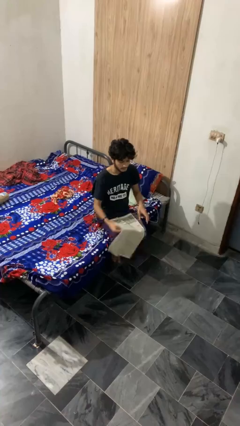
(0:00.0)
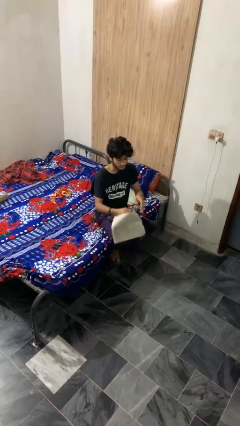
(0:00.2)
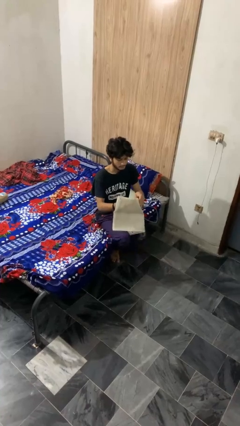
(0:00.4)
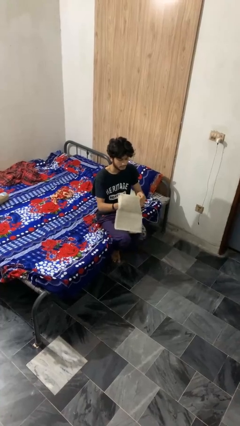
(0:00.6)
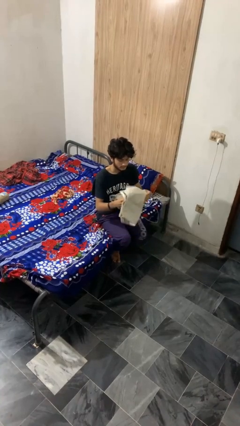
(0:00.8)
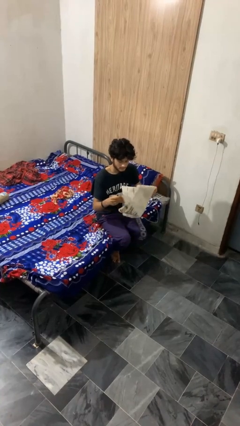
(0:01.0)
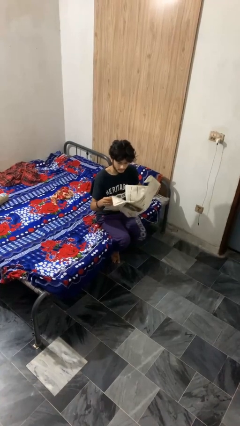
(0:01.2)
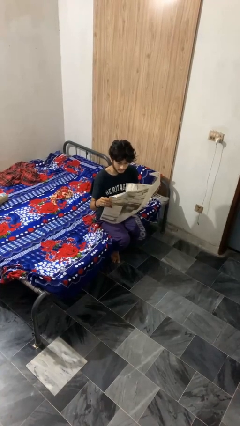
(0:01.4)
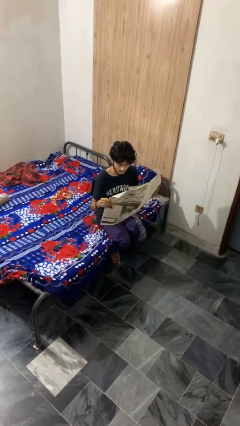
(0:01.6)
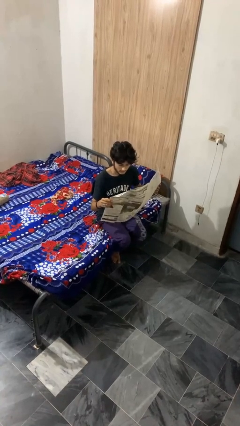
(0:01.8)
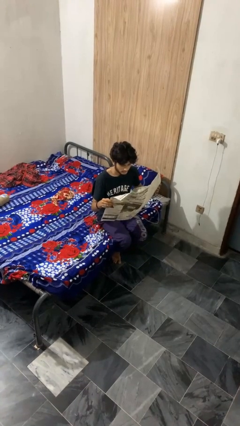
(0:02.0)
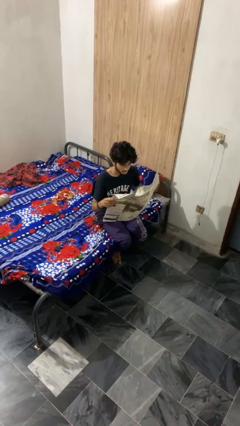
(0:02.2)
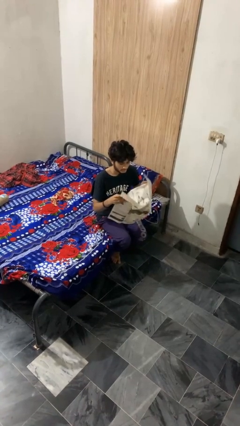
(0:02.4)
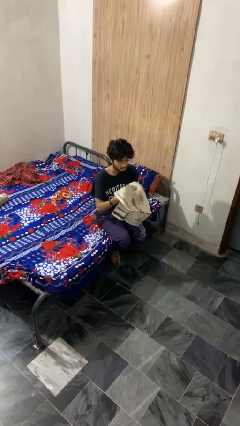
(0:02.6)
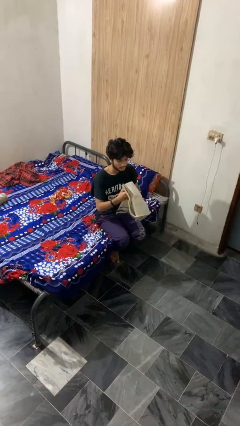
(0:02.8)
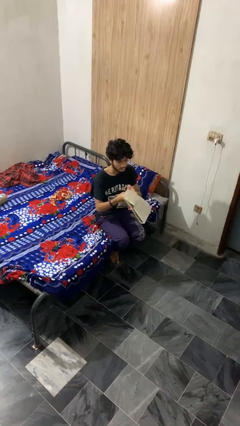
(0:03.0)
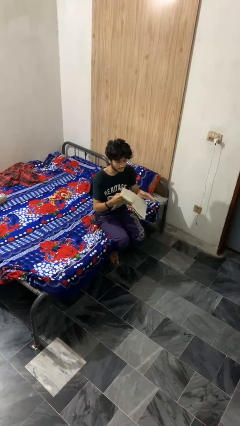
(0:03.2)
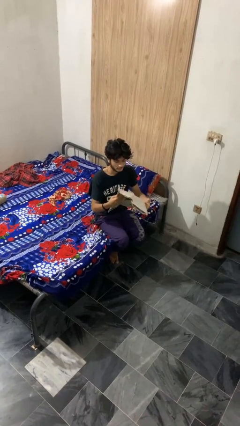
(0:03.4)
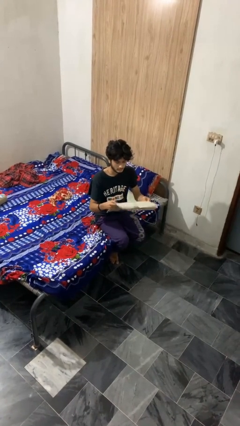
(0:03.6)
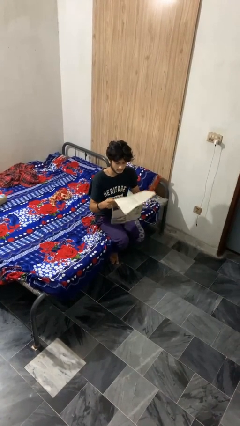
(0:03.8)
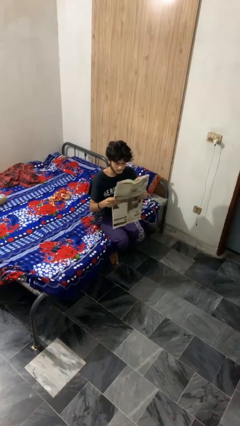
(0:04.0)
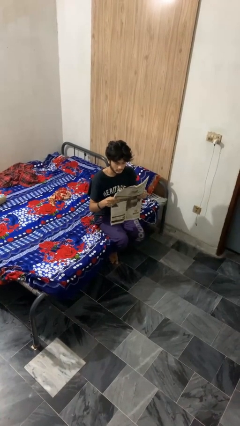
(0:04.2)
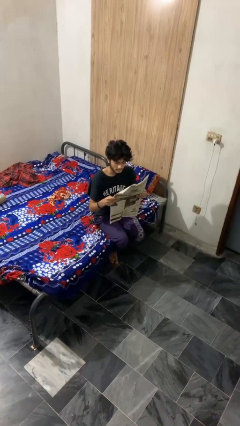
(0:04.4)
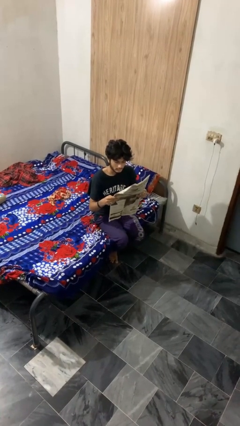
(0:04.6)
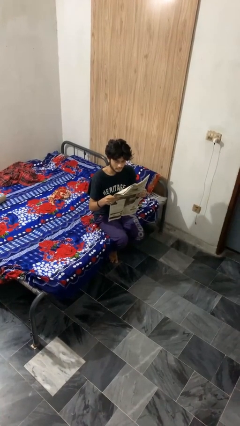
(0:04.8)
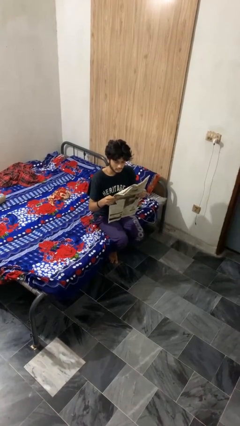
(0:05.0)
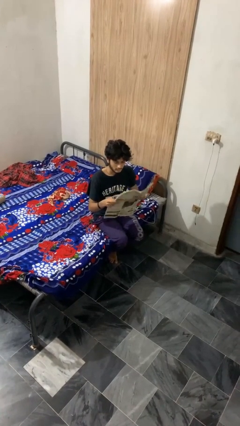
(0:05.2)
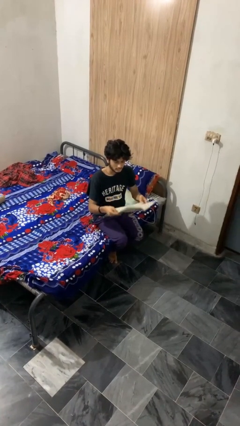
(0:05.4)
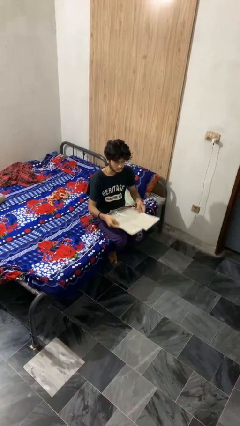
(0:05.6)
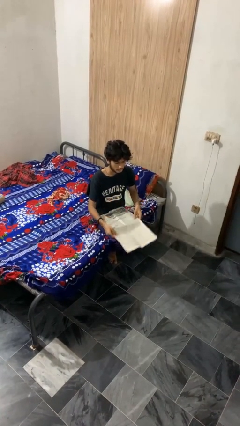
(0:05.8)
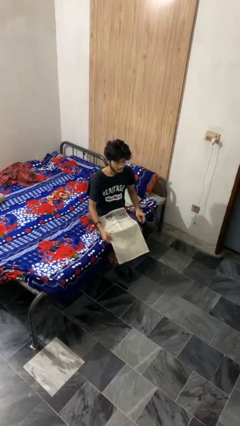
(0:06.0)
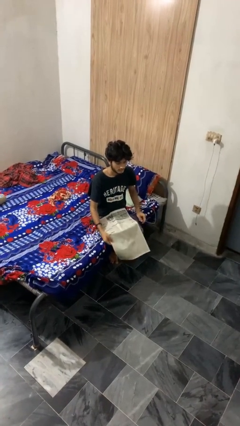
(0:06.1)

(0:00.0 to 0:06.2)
person reads newspaper

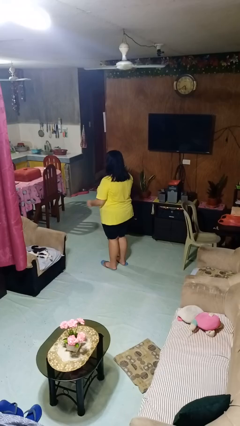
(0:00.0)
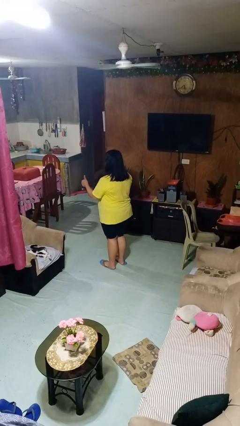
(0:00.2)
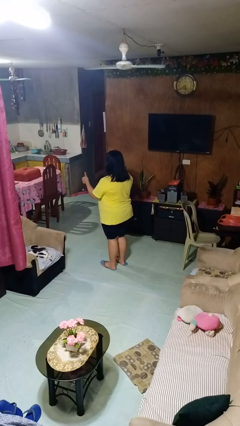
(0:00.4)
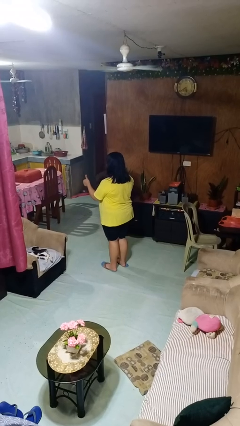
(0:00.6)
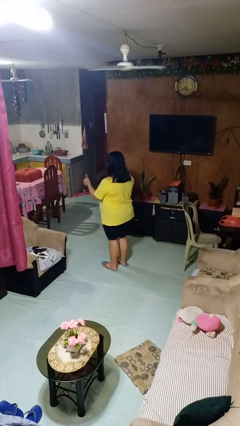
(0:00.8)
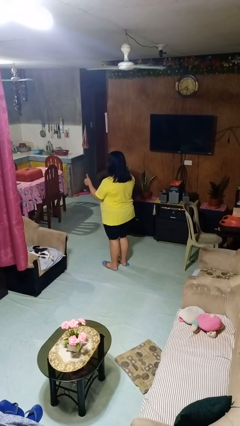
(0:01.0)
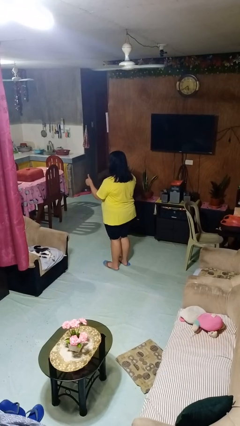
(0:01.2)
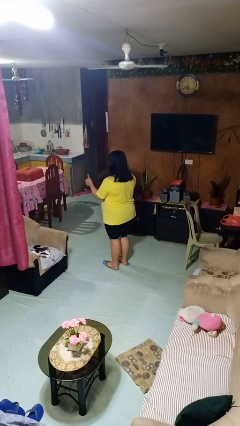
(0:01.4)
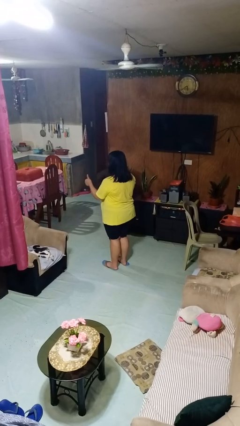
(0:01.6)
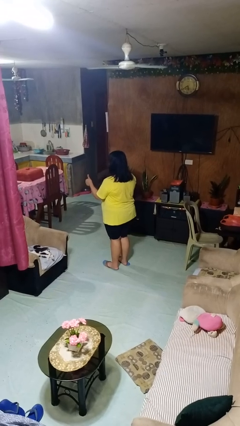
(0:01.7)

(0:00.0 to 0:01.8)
person gestures thumbs up

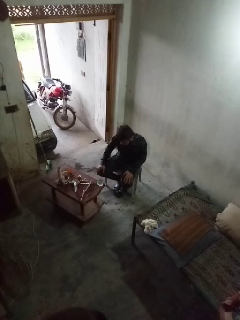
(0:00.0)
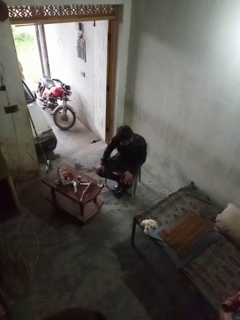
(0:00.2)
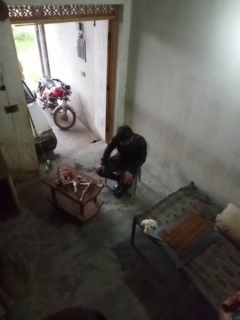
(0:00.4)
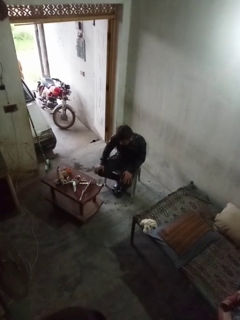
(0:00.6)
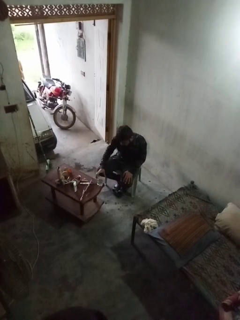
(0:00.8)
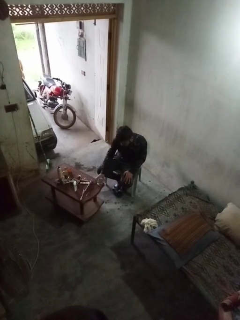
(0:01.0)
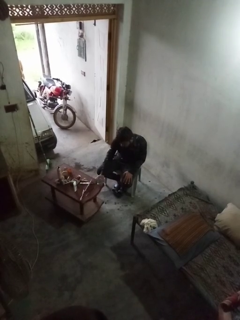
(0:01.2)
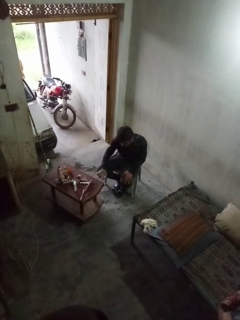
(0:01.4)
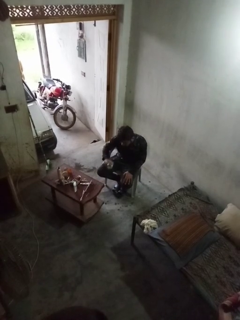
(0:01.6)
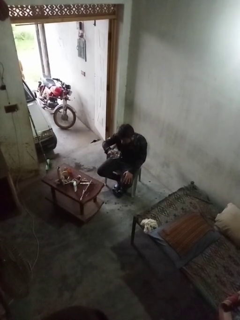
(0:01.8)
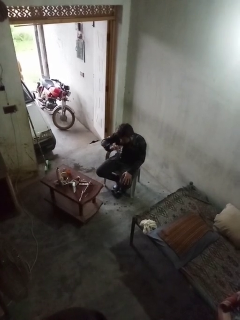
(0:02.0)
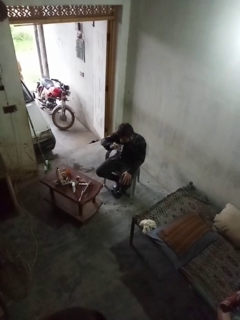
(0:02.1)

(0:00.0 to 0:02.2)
person picks up object from table

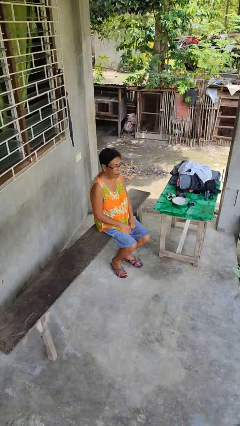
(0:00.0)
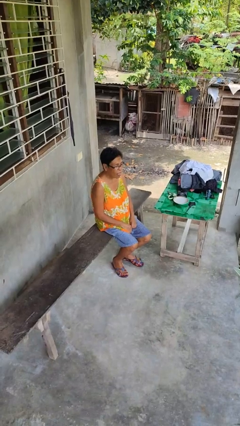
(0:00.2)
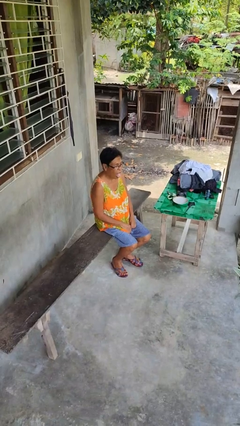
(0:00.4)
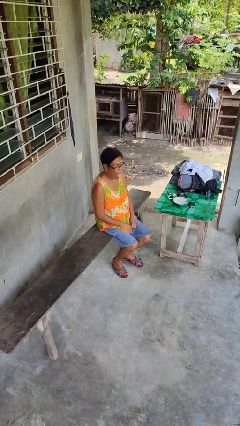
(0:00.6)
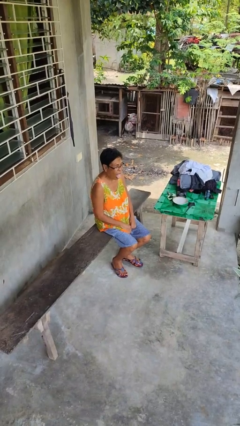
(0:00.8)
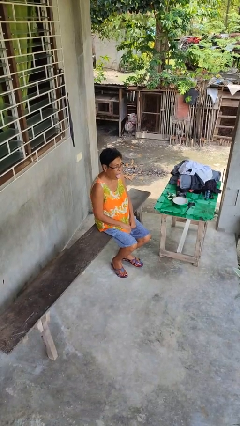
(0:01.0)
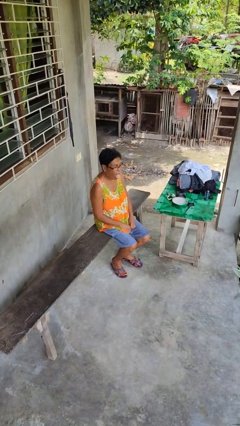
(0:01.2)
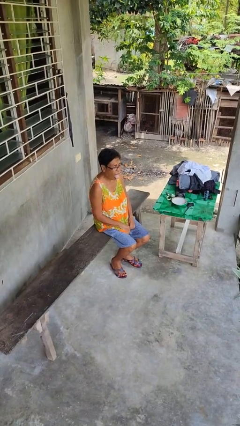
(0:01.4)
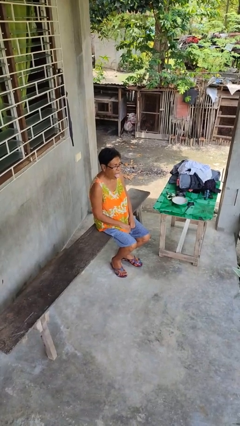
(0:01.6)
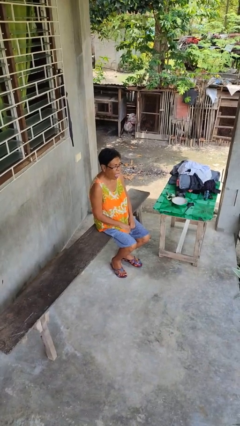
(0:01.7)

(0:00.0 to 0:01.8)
person sticks out tongue

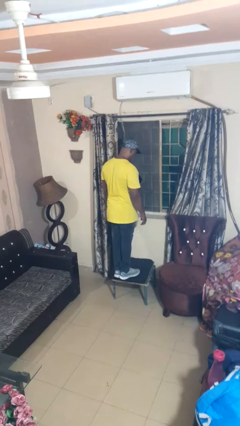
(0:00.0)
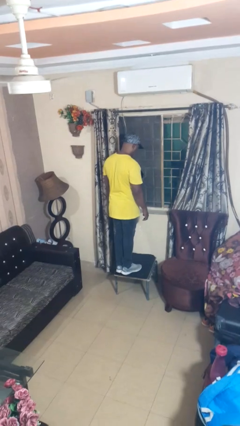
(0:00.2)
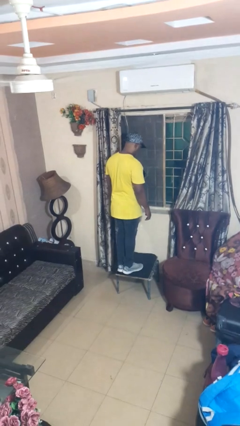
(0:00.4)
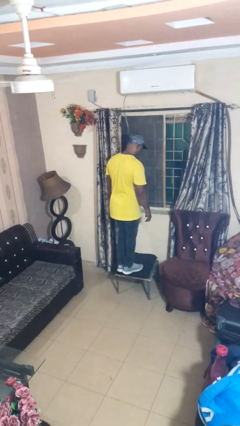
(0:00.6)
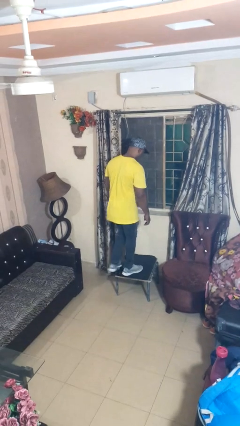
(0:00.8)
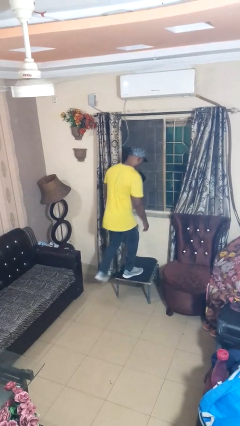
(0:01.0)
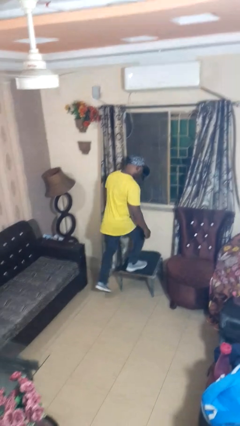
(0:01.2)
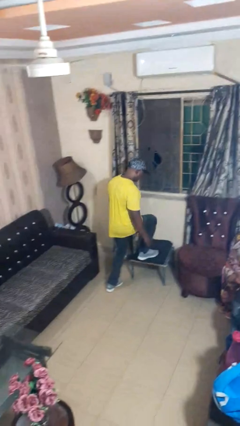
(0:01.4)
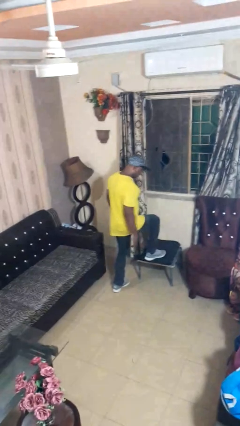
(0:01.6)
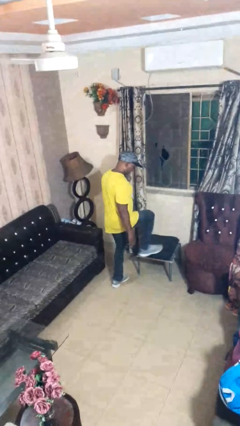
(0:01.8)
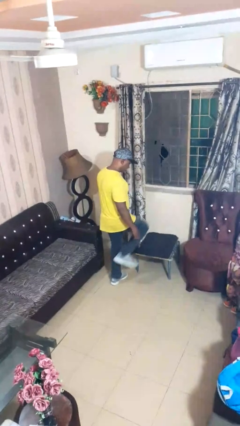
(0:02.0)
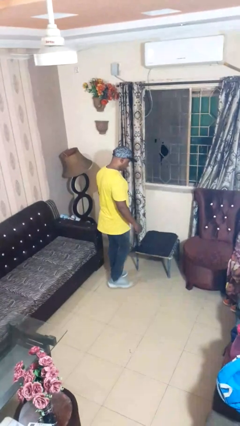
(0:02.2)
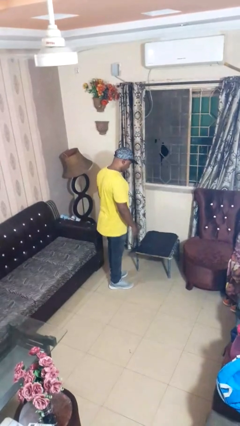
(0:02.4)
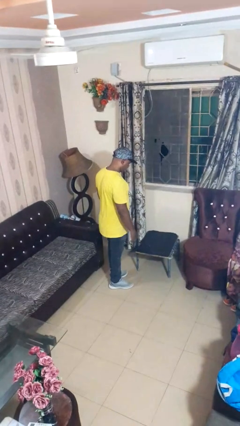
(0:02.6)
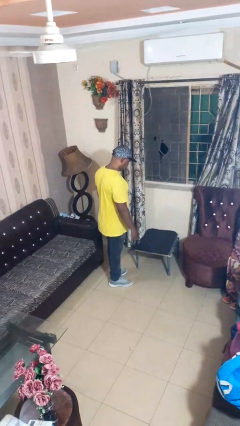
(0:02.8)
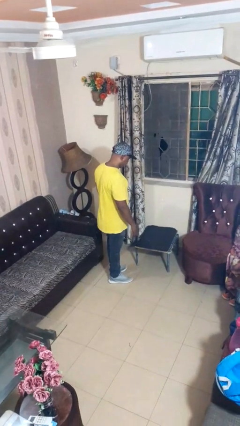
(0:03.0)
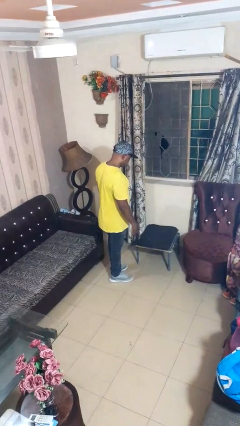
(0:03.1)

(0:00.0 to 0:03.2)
person climbs off table

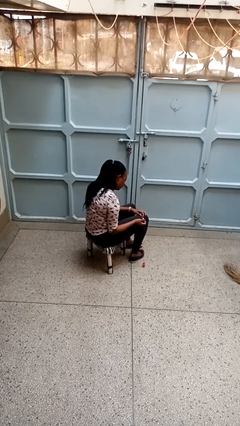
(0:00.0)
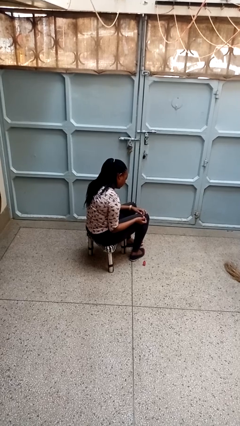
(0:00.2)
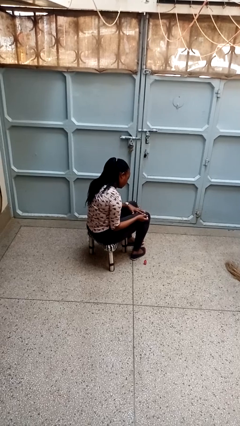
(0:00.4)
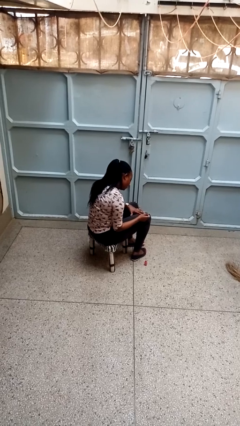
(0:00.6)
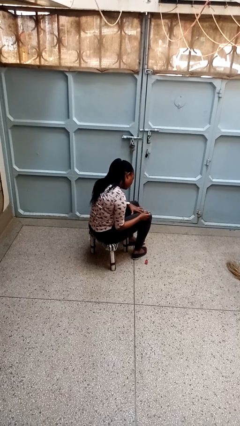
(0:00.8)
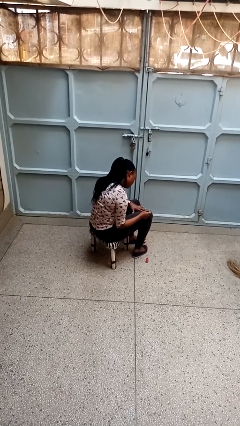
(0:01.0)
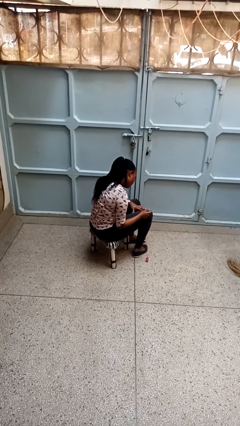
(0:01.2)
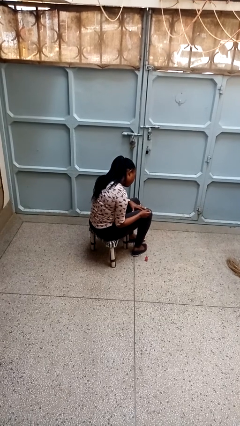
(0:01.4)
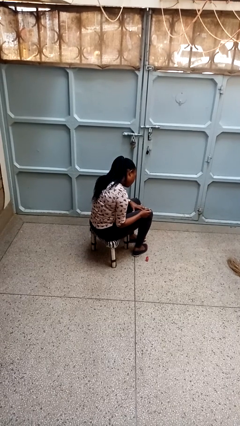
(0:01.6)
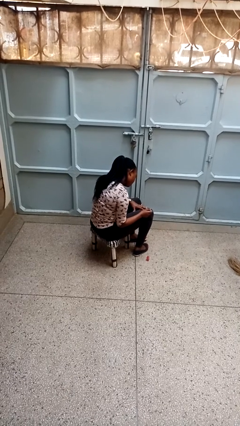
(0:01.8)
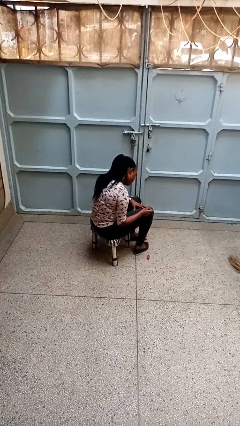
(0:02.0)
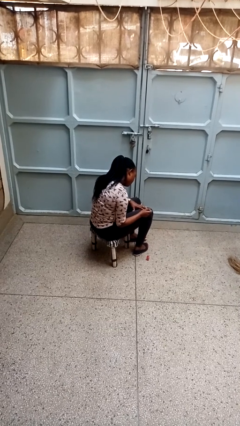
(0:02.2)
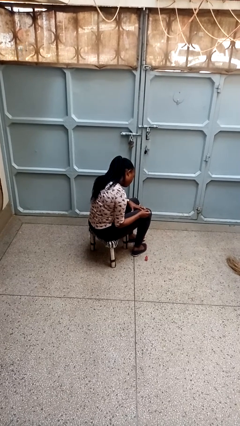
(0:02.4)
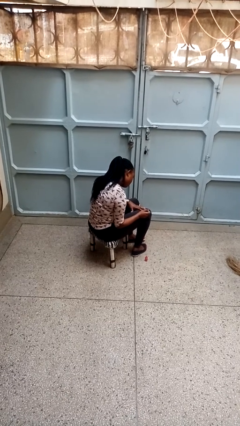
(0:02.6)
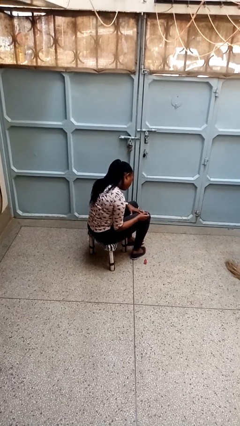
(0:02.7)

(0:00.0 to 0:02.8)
person paints fingernails
